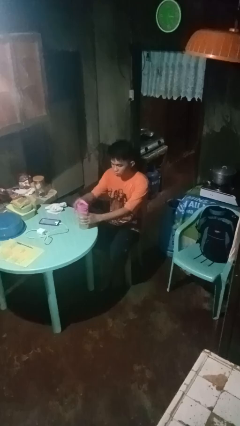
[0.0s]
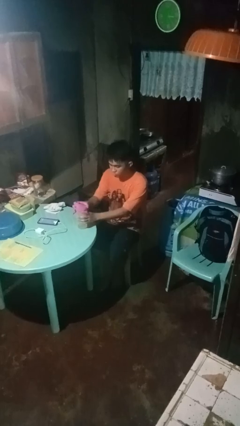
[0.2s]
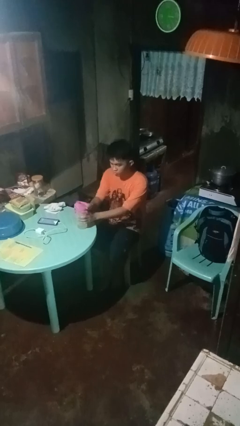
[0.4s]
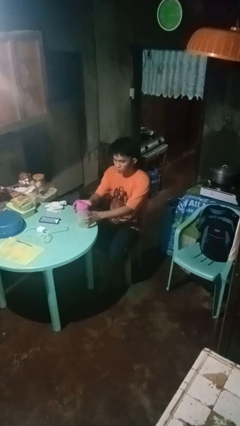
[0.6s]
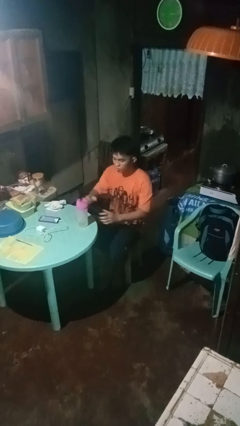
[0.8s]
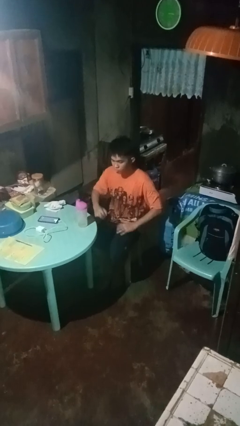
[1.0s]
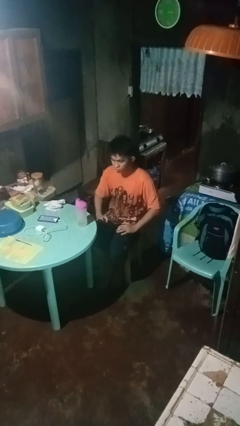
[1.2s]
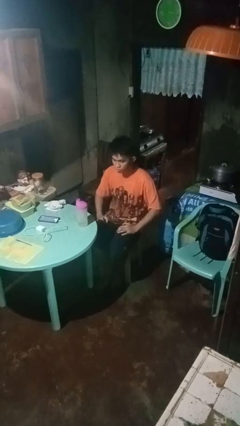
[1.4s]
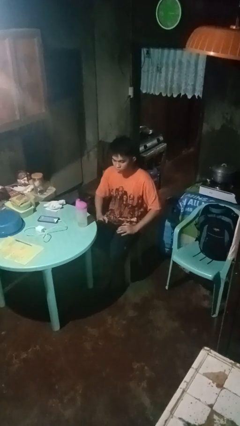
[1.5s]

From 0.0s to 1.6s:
person screws lid to bottle

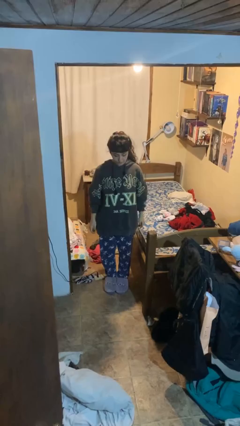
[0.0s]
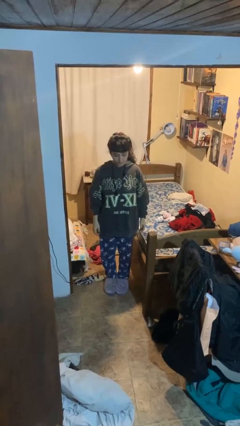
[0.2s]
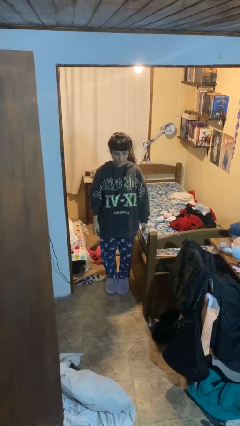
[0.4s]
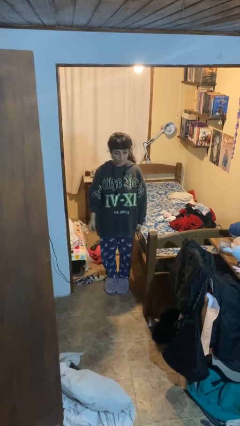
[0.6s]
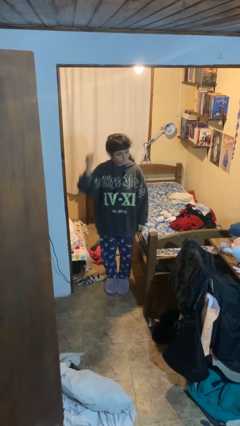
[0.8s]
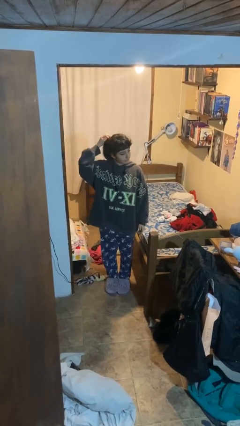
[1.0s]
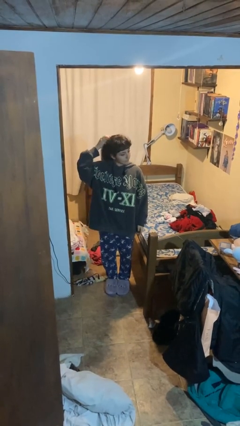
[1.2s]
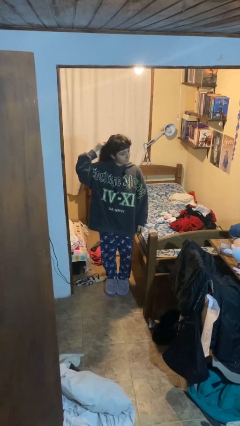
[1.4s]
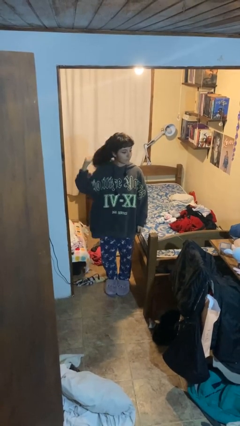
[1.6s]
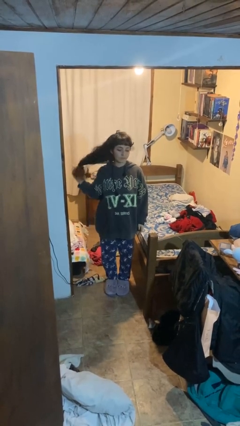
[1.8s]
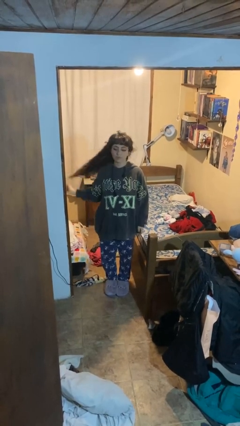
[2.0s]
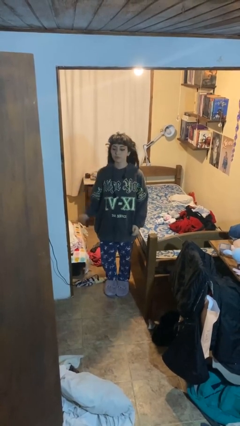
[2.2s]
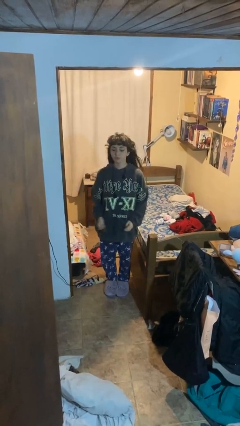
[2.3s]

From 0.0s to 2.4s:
person takes off hairtie

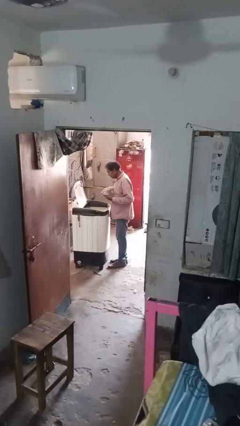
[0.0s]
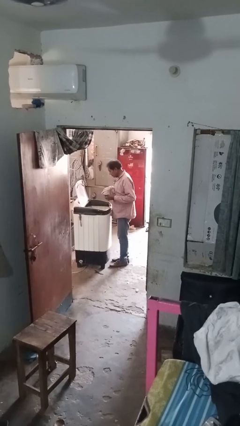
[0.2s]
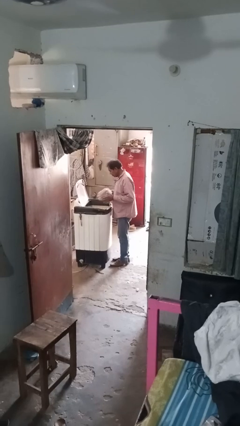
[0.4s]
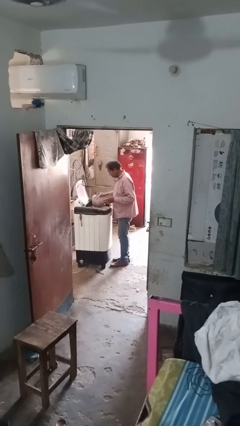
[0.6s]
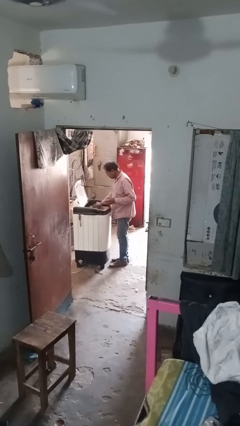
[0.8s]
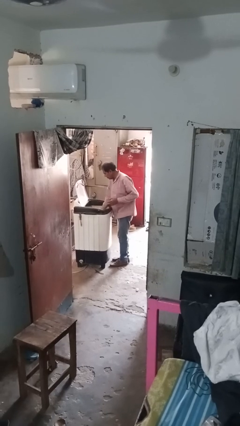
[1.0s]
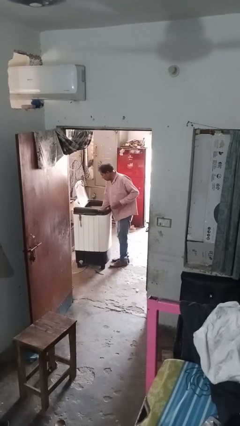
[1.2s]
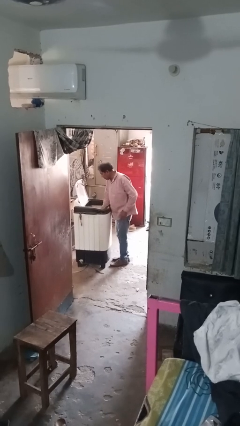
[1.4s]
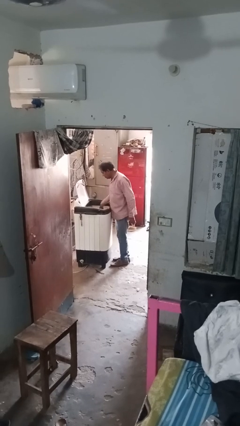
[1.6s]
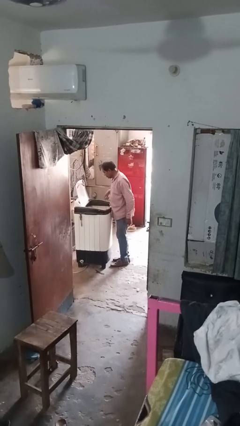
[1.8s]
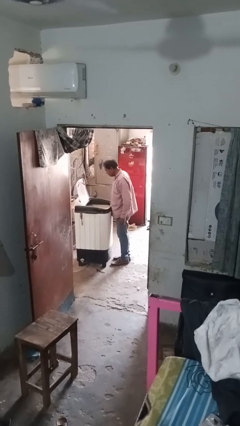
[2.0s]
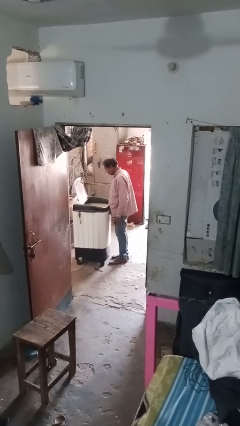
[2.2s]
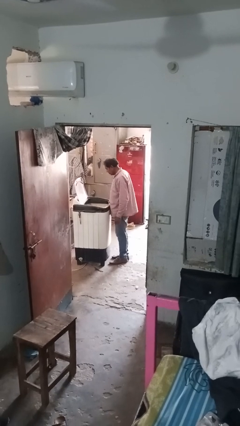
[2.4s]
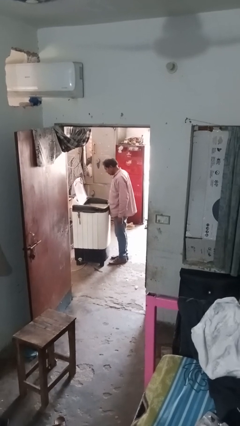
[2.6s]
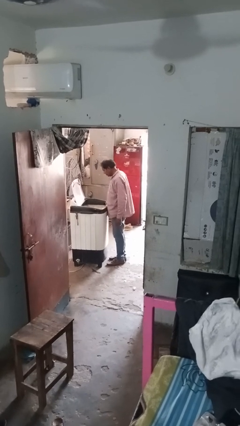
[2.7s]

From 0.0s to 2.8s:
person loads clotheswasher

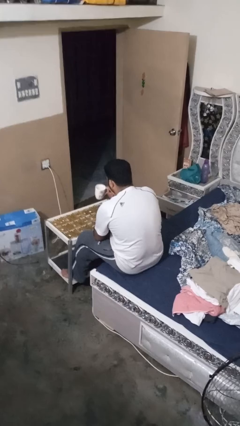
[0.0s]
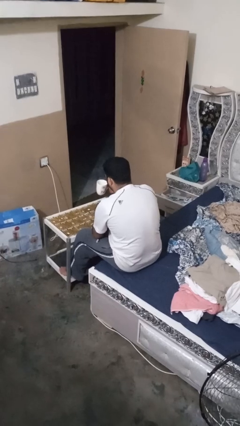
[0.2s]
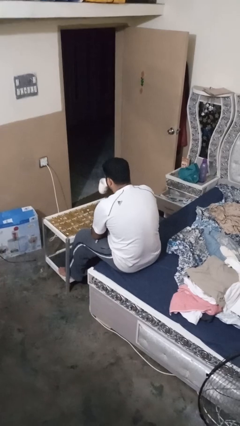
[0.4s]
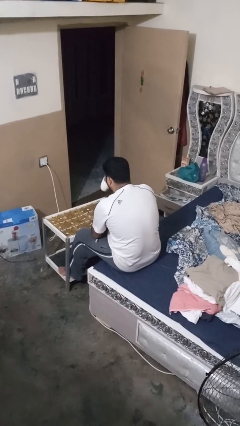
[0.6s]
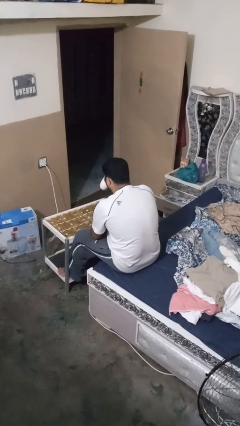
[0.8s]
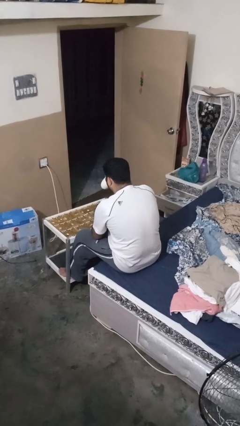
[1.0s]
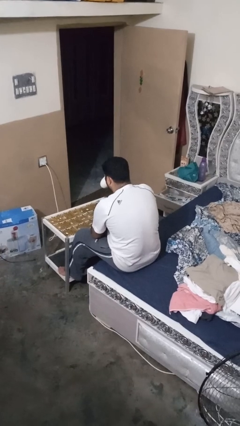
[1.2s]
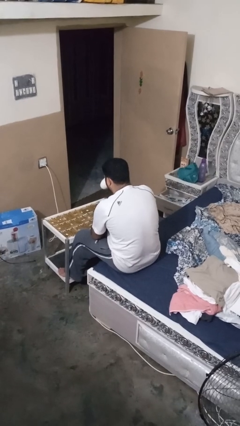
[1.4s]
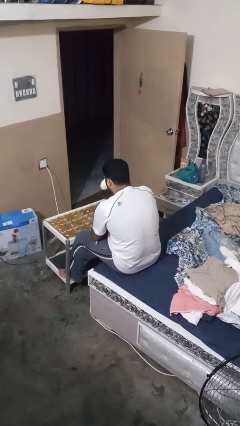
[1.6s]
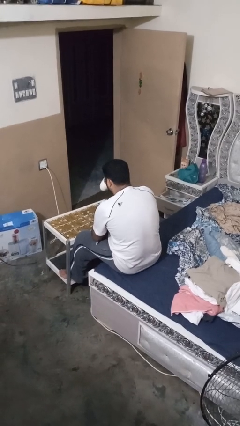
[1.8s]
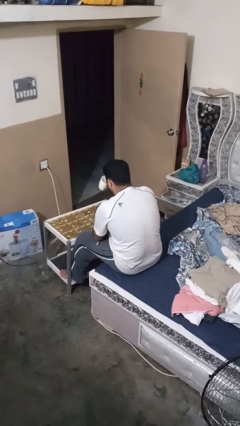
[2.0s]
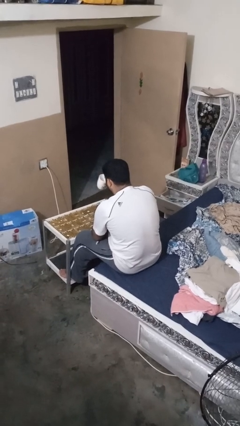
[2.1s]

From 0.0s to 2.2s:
person drinks from mug

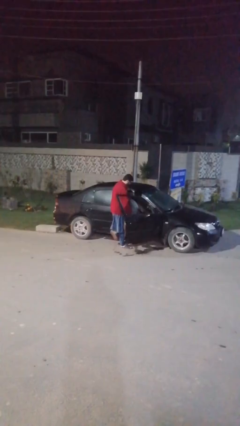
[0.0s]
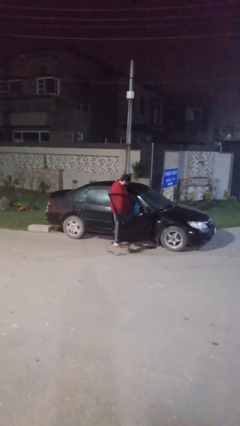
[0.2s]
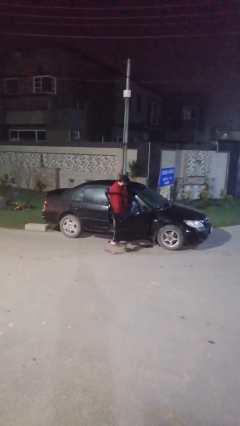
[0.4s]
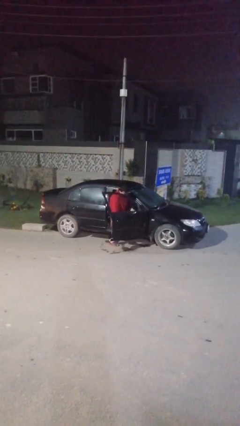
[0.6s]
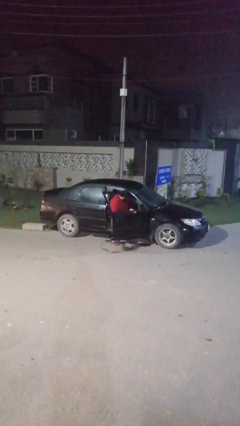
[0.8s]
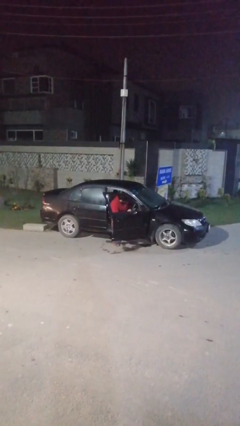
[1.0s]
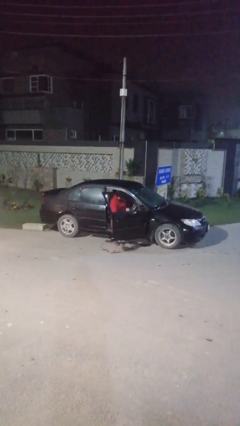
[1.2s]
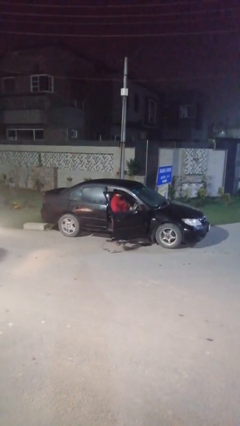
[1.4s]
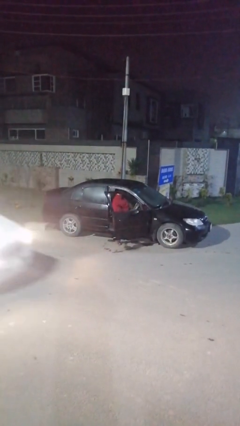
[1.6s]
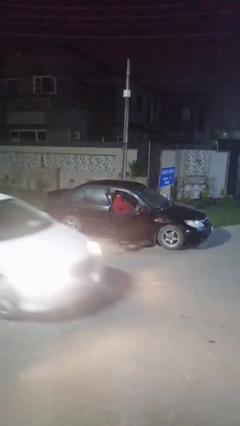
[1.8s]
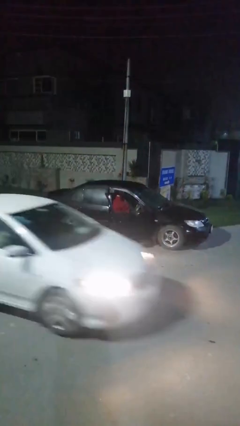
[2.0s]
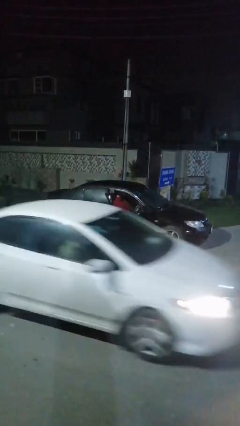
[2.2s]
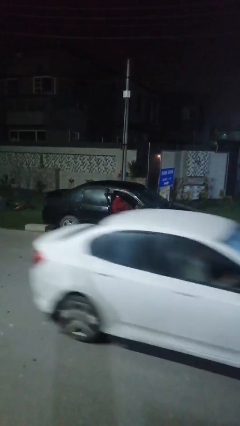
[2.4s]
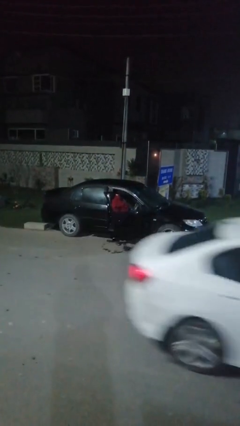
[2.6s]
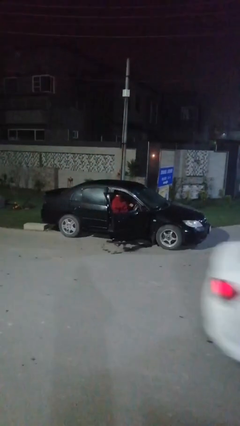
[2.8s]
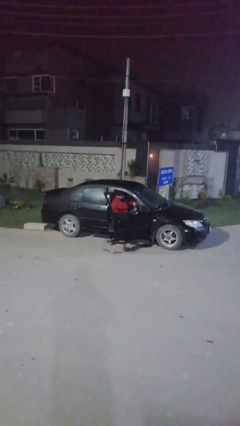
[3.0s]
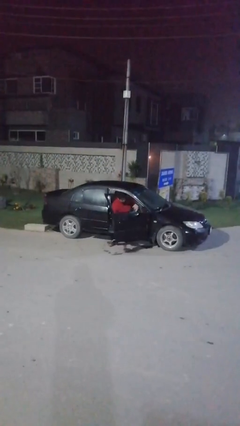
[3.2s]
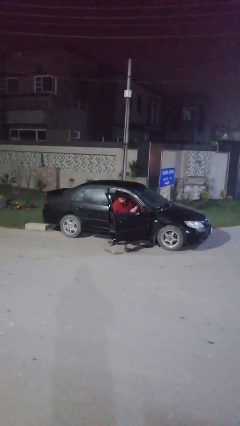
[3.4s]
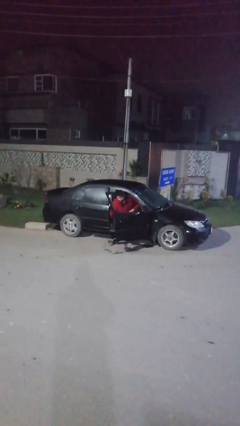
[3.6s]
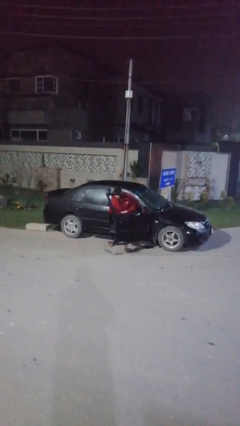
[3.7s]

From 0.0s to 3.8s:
person enters car

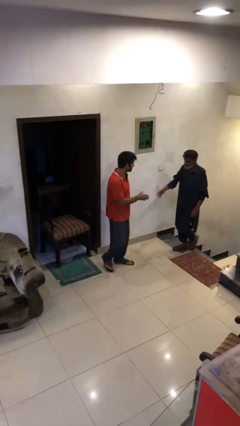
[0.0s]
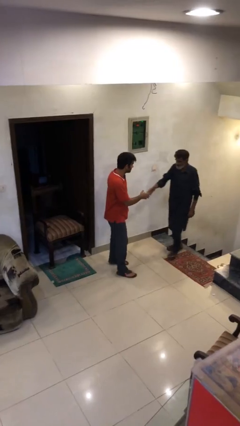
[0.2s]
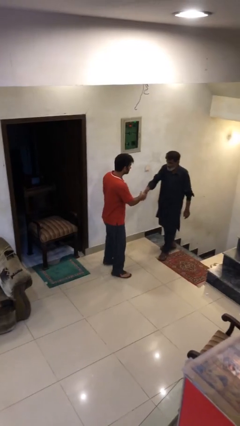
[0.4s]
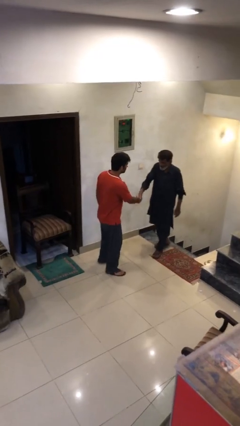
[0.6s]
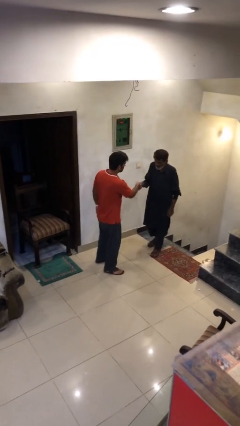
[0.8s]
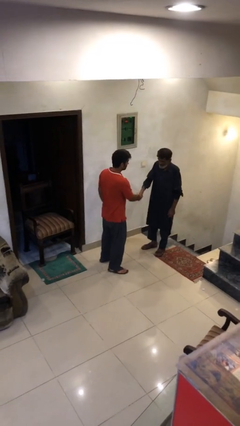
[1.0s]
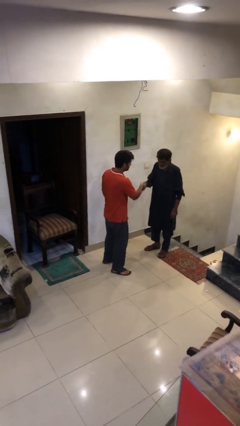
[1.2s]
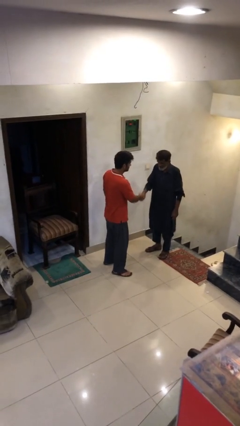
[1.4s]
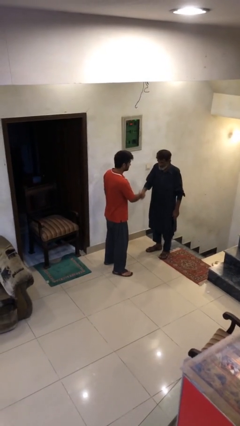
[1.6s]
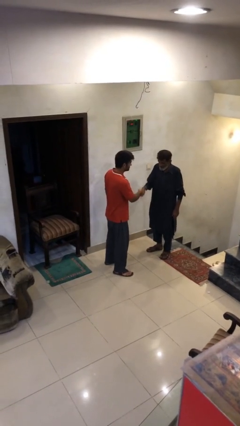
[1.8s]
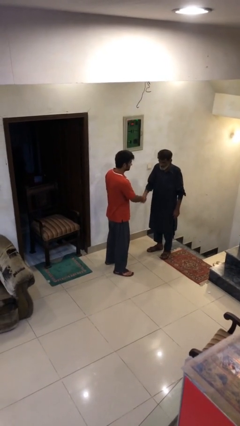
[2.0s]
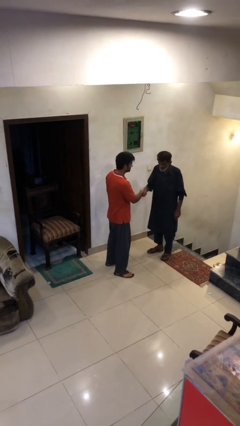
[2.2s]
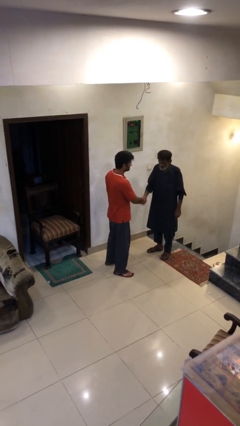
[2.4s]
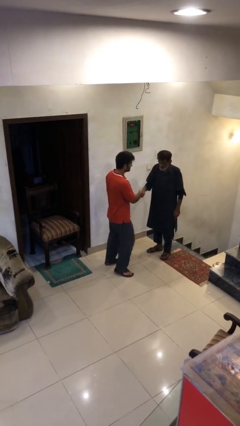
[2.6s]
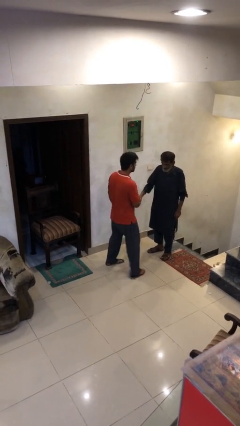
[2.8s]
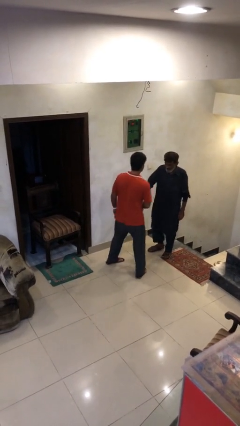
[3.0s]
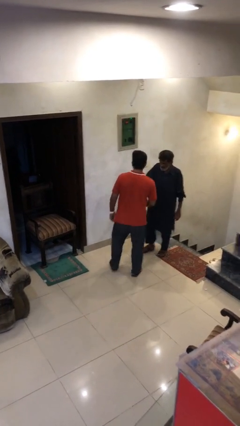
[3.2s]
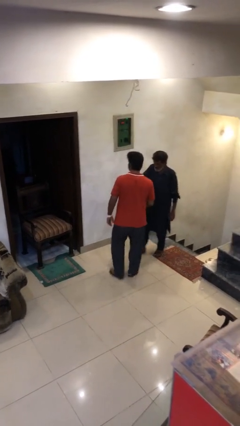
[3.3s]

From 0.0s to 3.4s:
person shakes hand

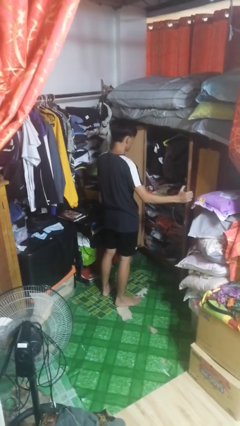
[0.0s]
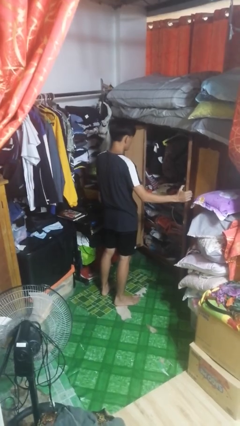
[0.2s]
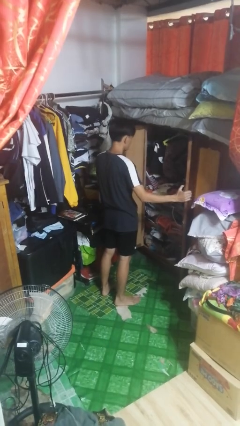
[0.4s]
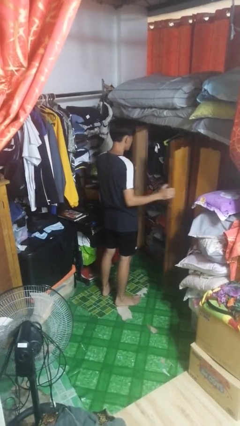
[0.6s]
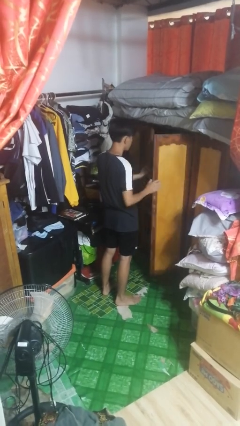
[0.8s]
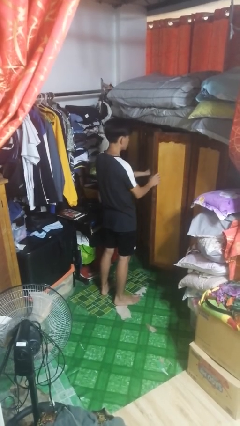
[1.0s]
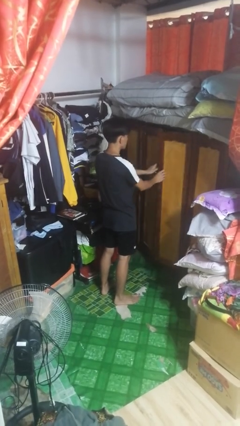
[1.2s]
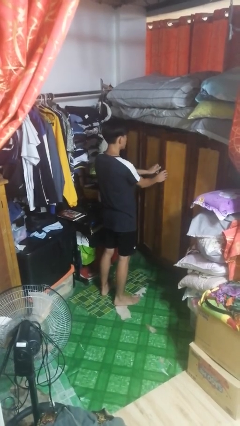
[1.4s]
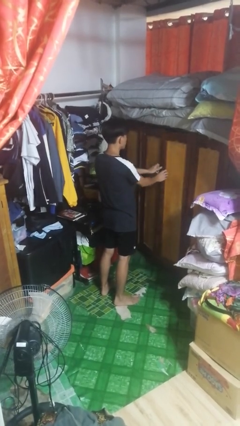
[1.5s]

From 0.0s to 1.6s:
person closes dresser drawer
